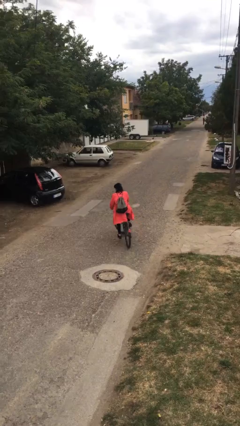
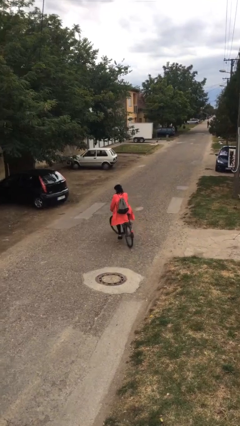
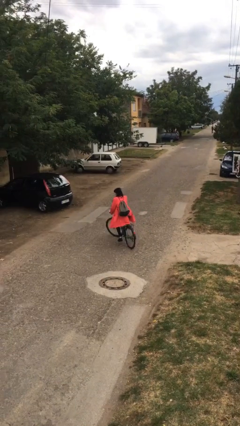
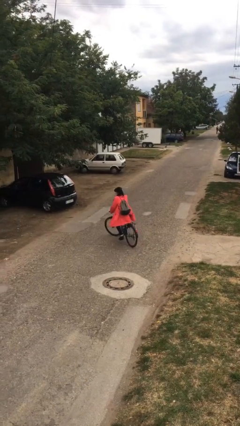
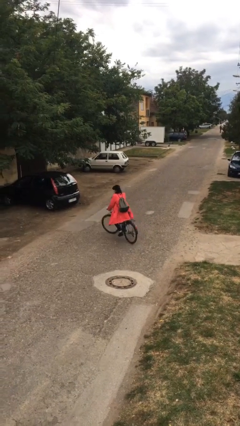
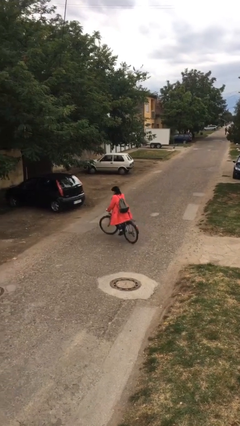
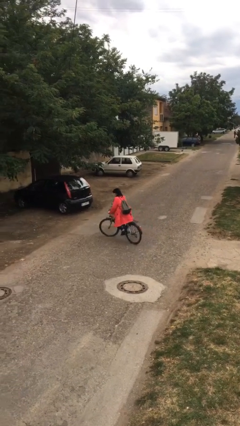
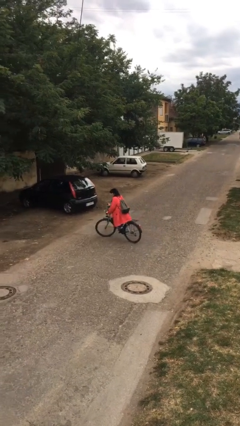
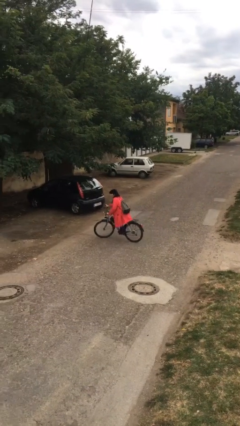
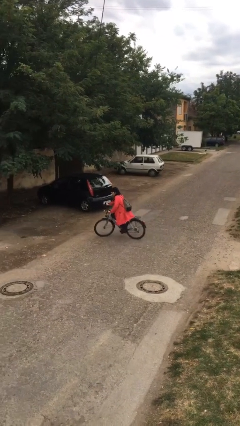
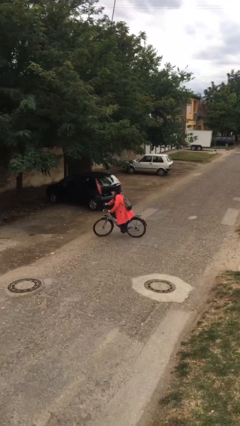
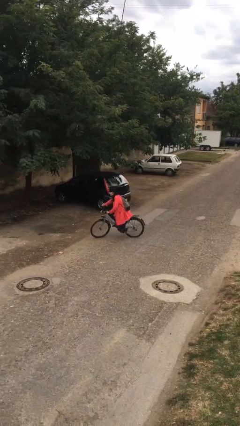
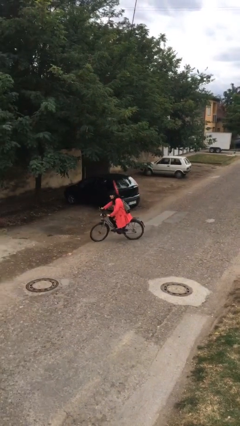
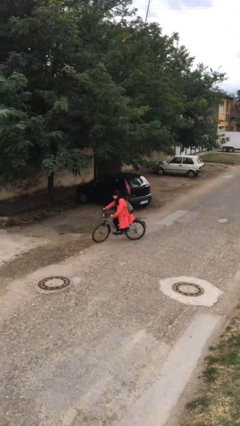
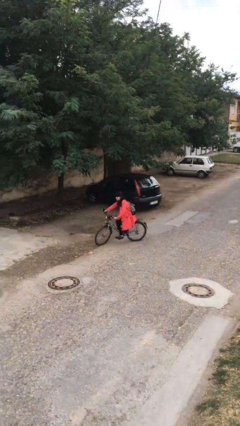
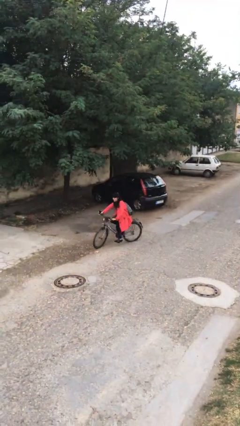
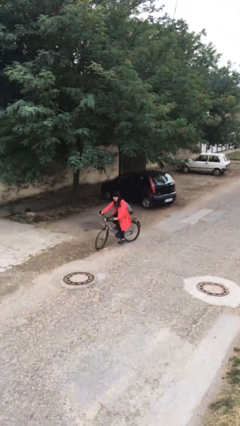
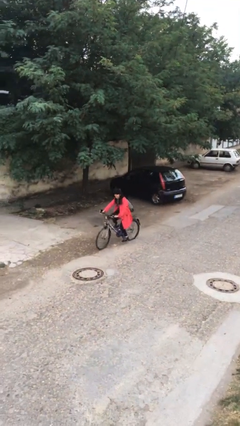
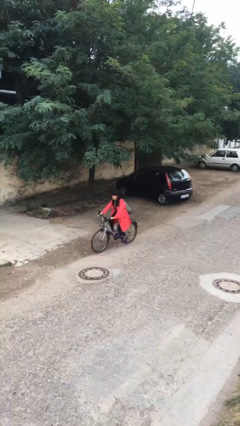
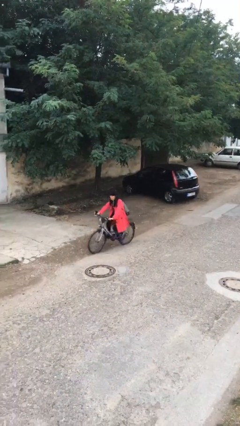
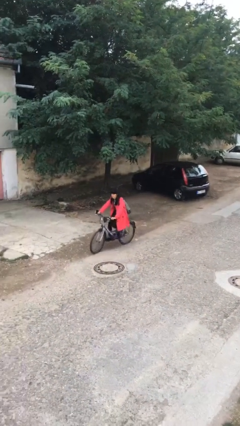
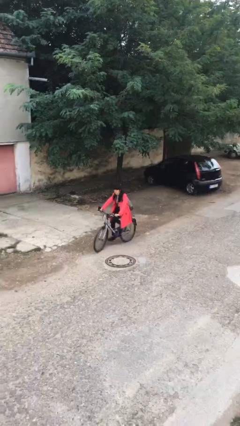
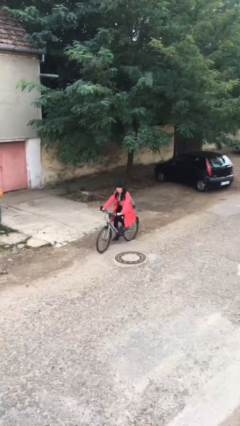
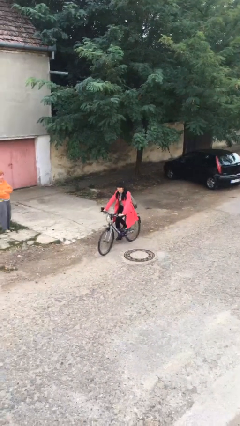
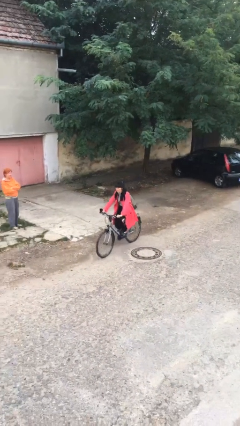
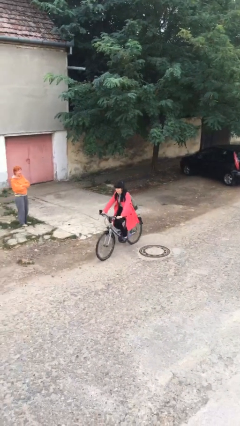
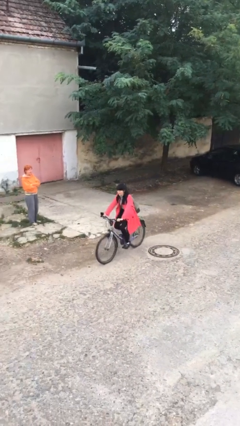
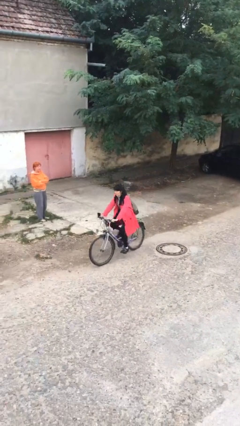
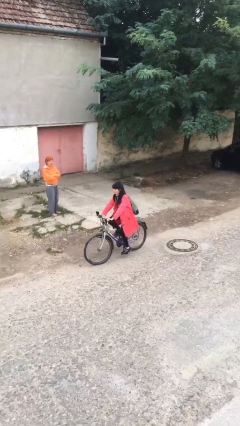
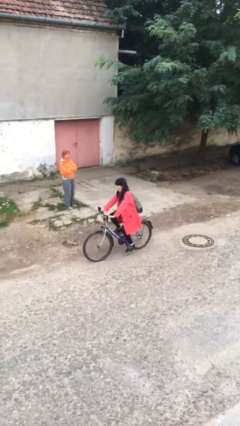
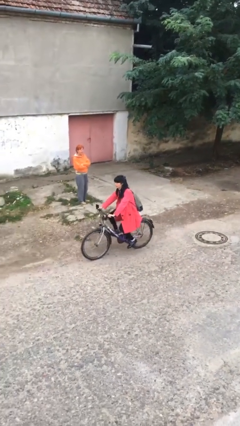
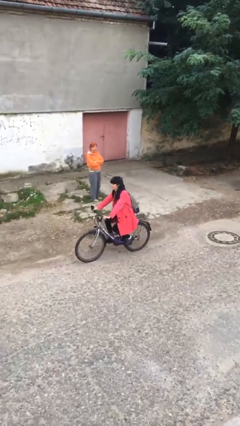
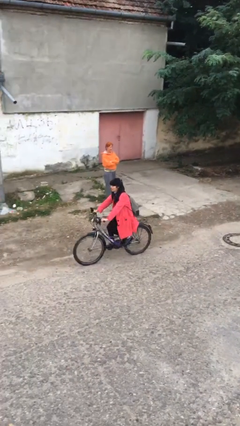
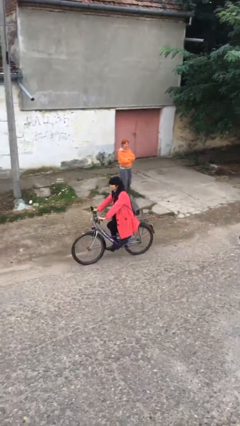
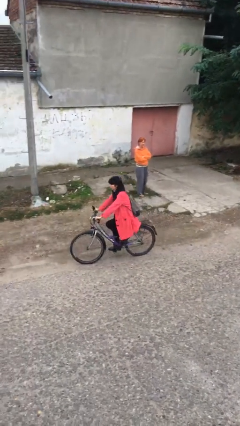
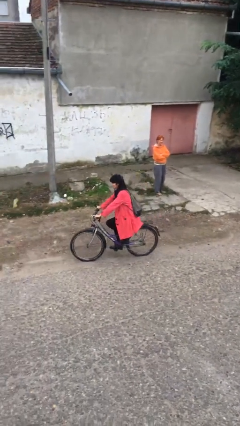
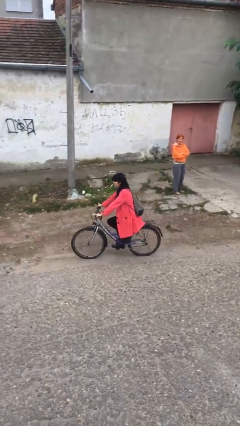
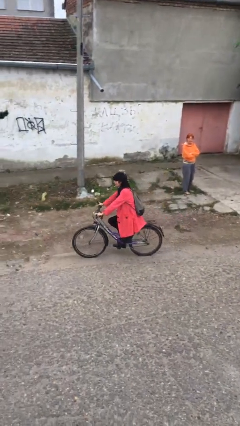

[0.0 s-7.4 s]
person rides bicycle

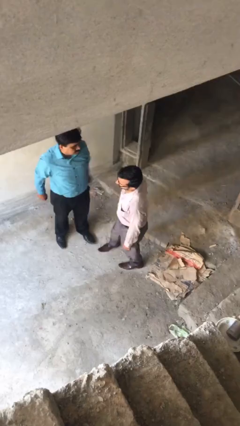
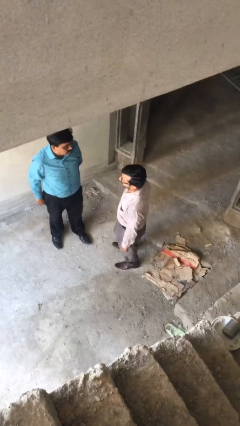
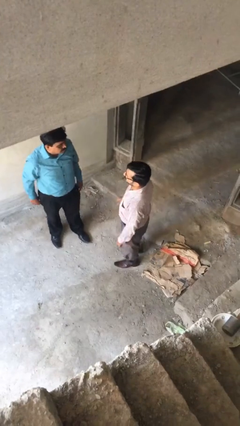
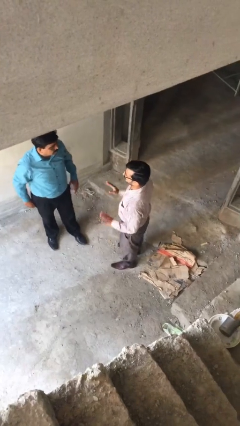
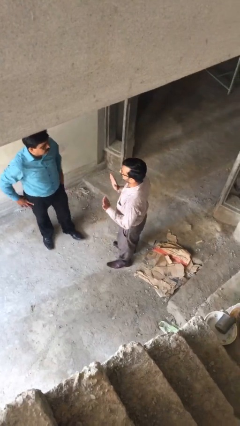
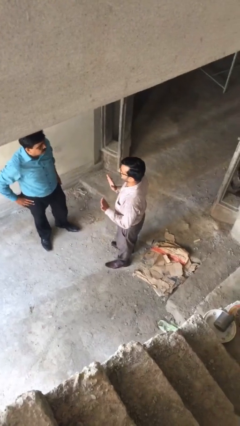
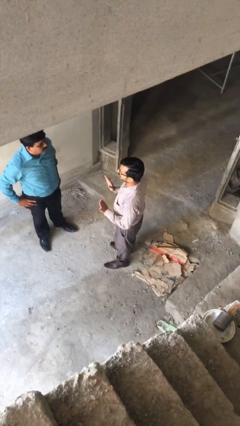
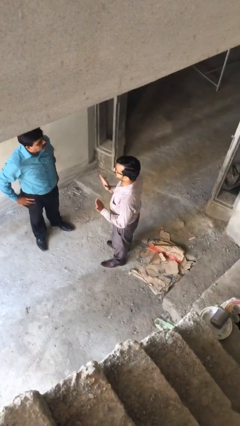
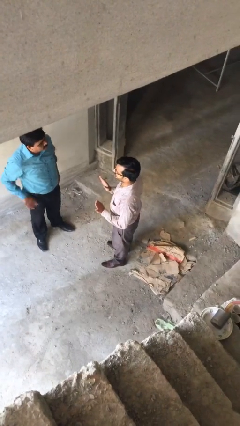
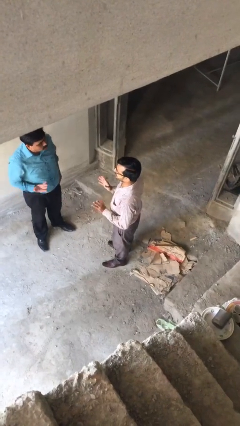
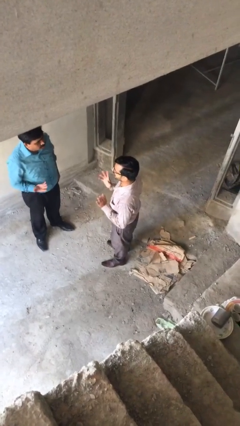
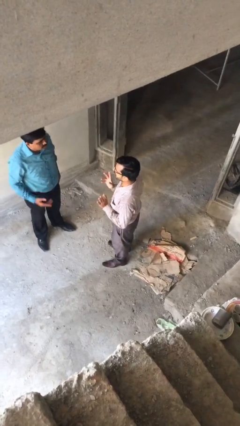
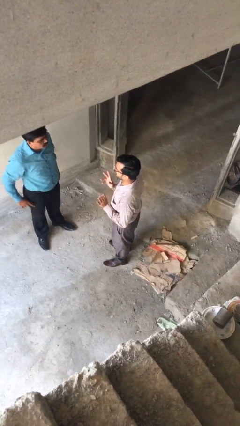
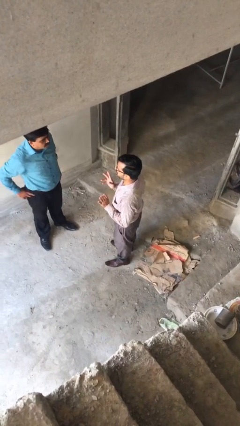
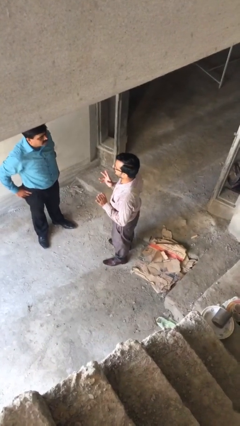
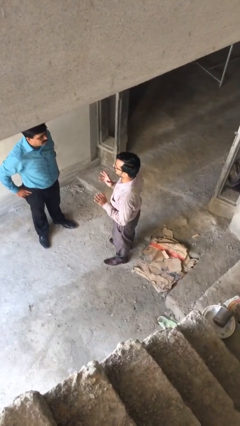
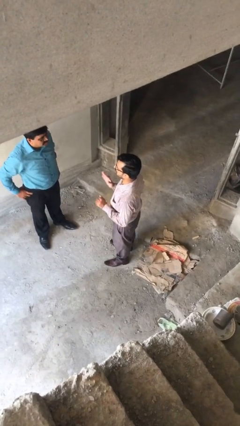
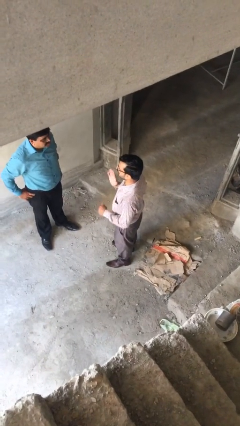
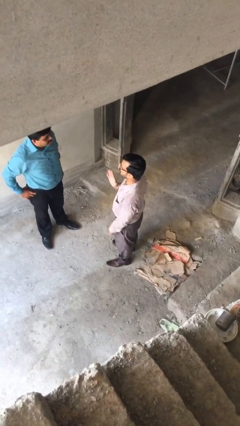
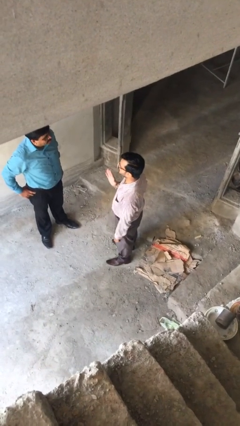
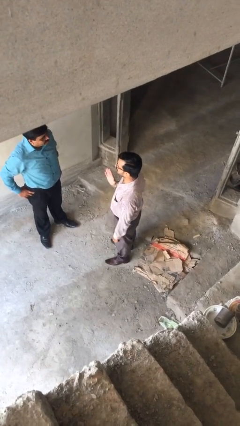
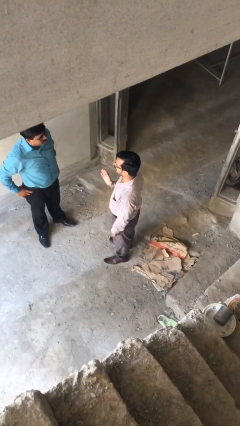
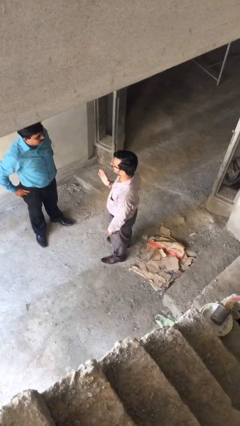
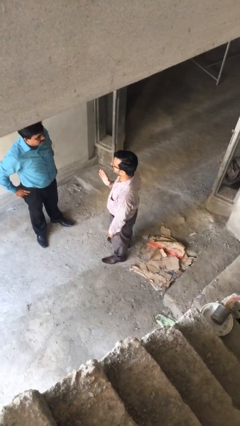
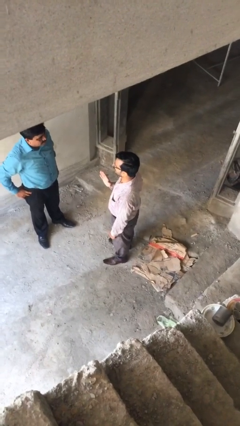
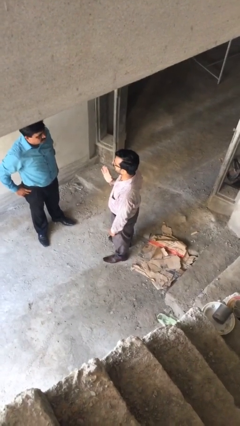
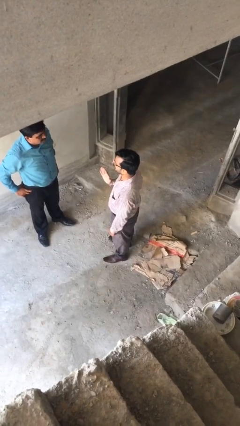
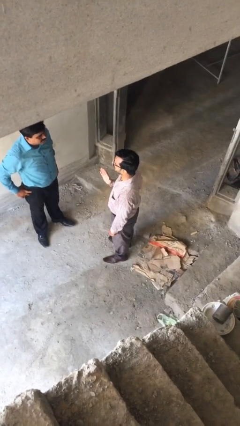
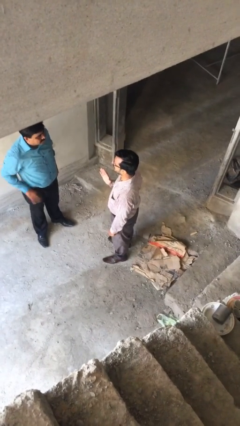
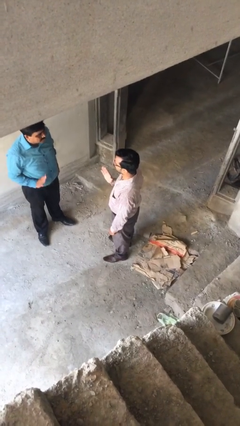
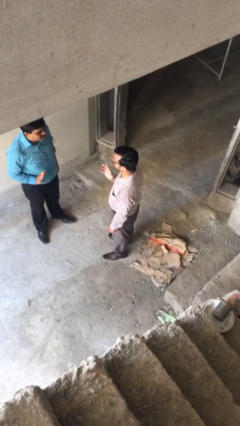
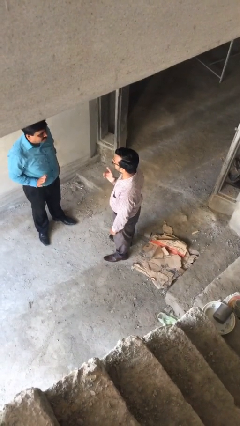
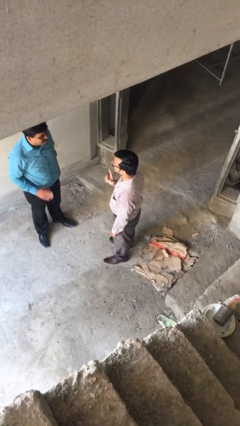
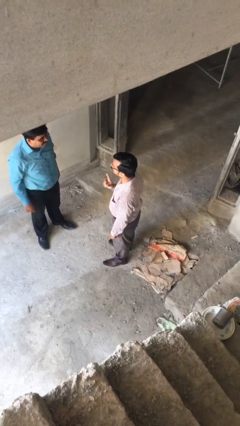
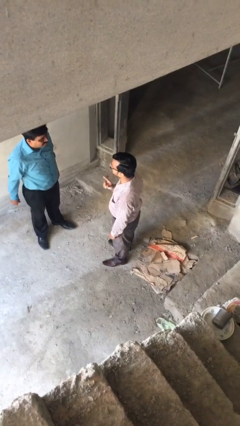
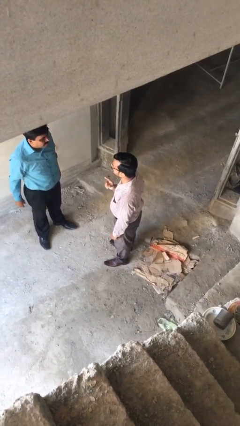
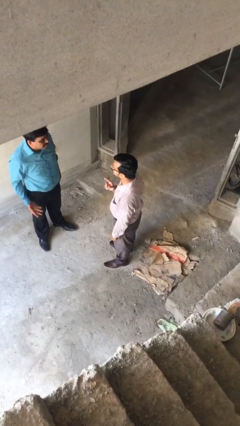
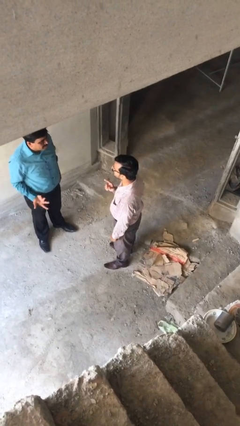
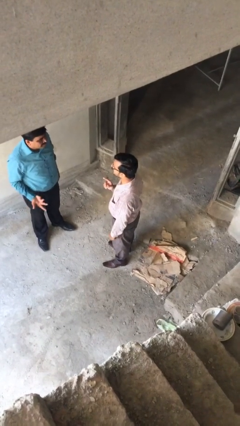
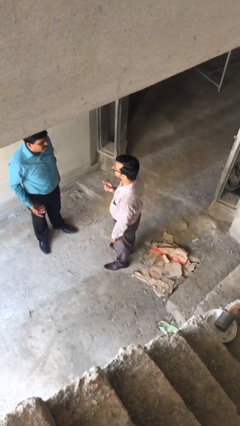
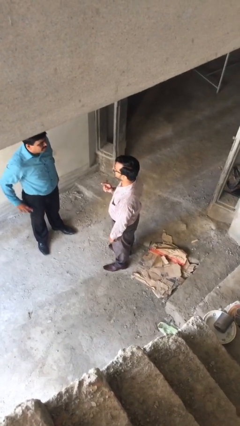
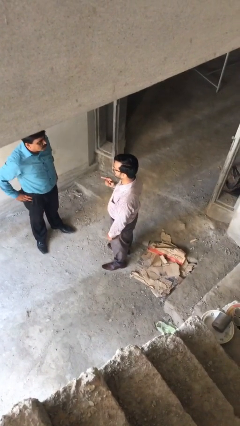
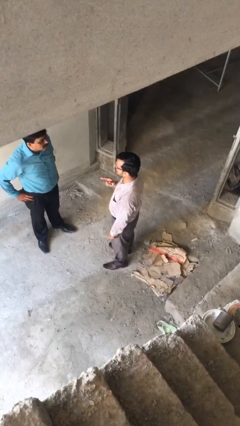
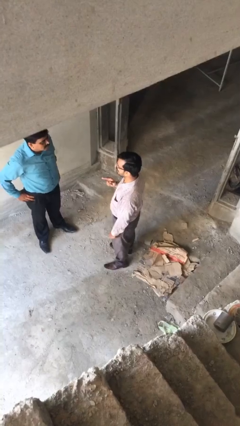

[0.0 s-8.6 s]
person talks to person

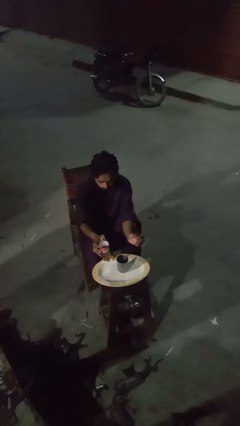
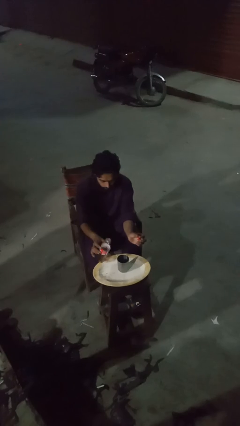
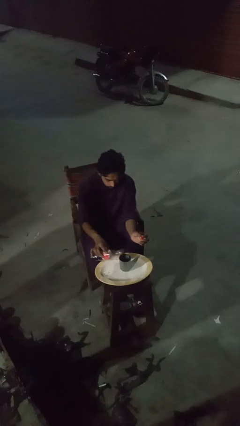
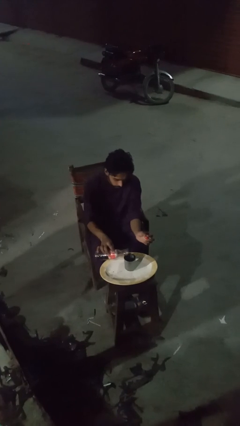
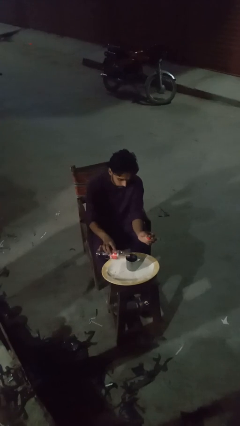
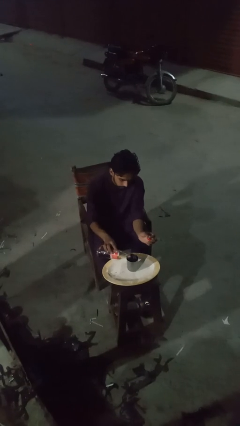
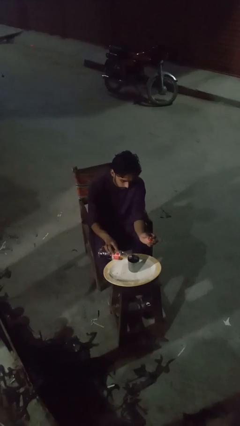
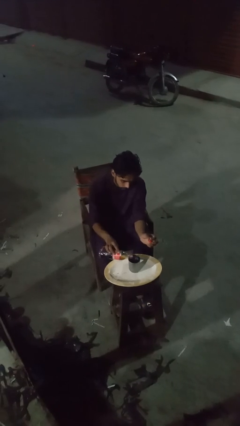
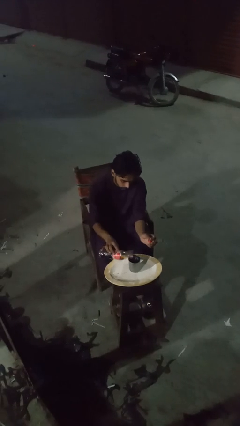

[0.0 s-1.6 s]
person pours liquid into cup

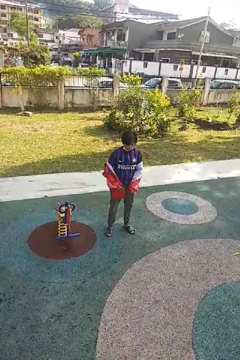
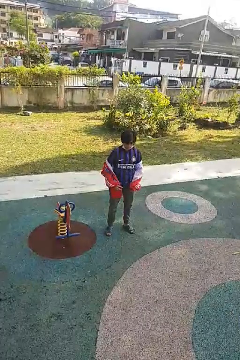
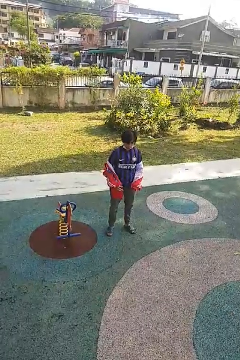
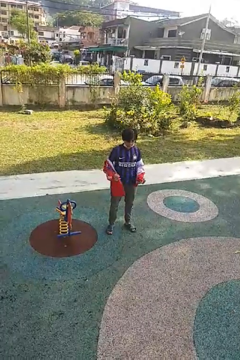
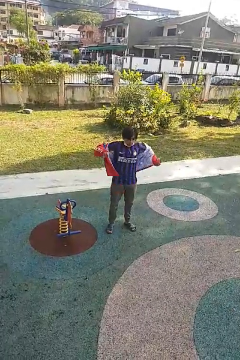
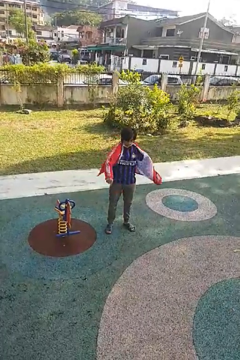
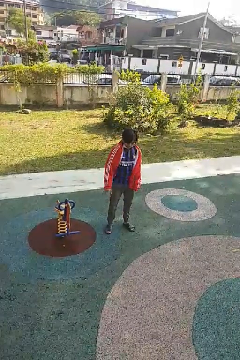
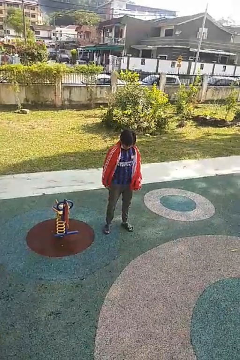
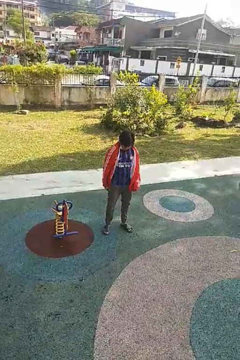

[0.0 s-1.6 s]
person puts on jacket
